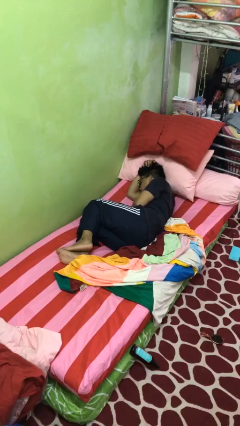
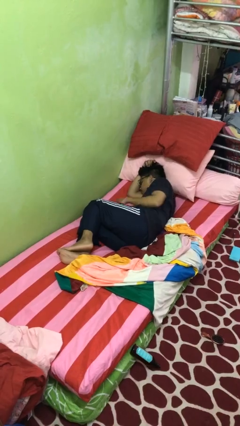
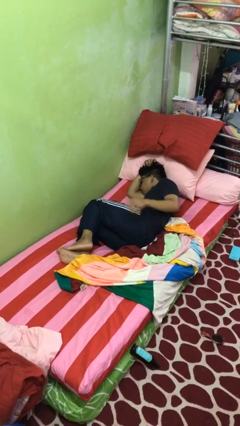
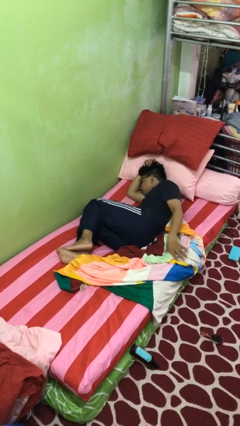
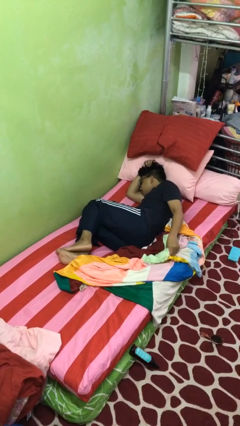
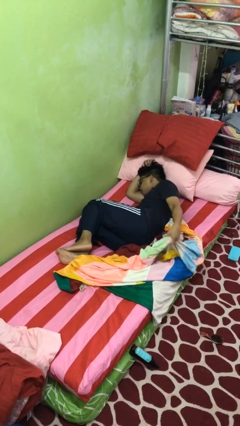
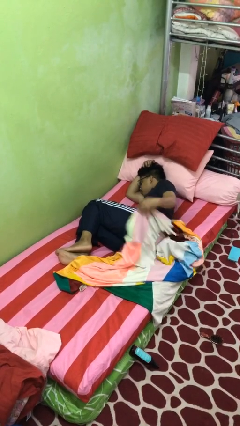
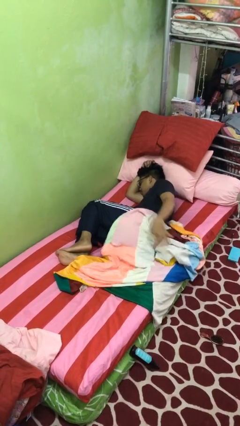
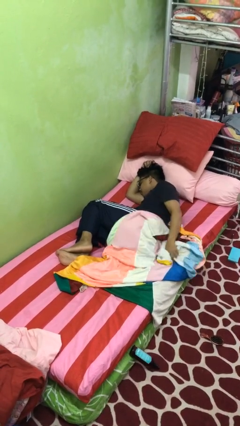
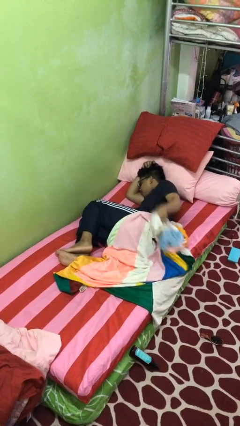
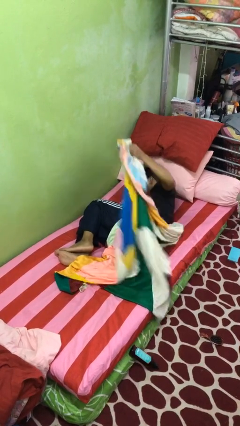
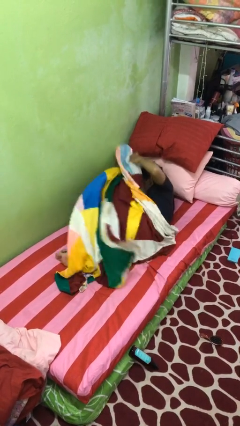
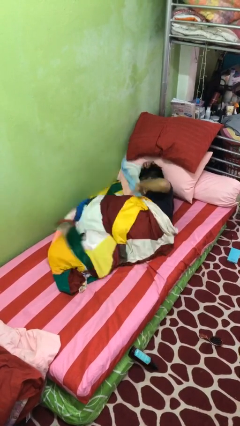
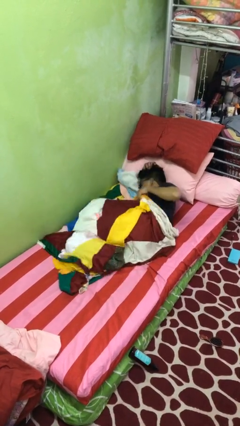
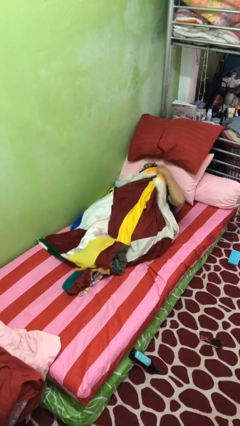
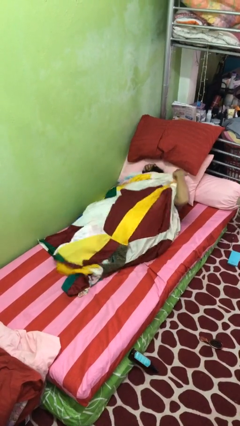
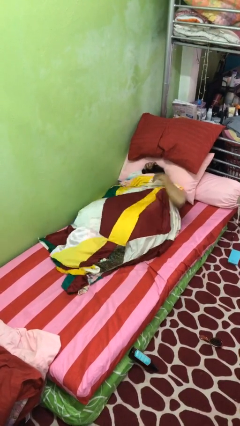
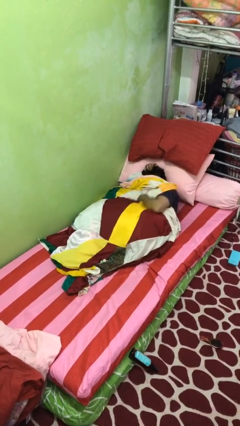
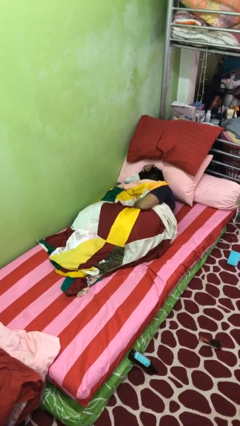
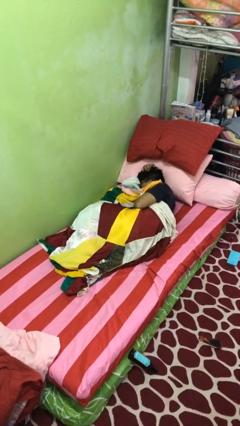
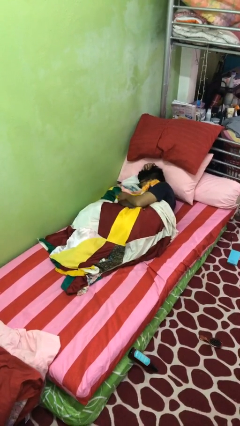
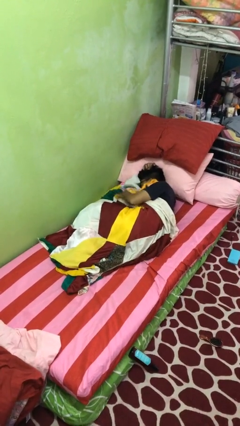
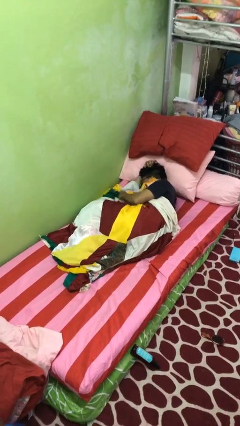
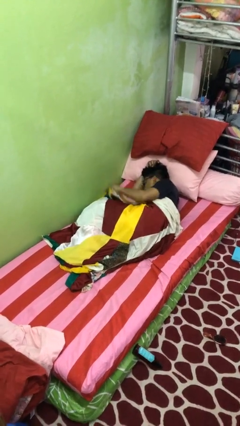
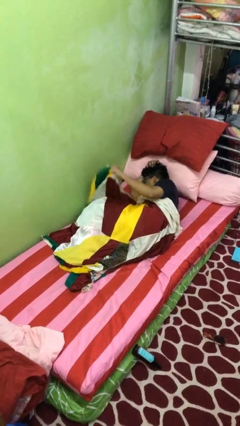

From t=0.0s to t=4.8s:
person covers with blanket

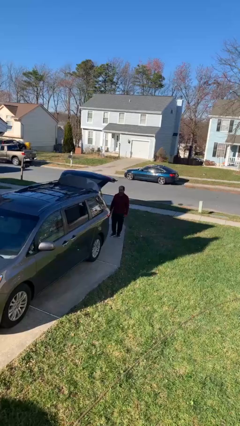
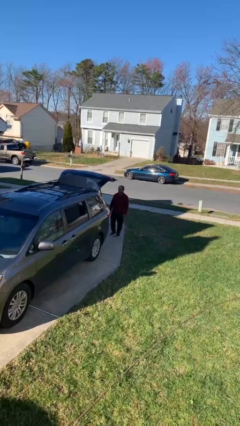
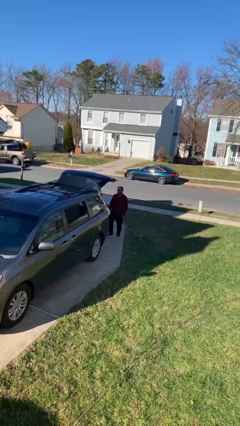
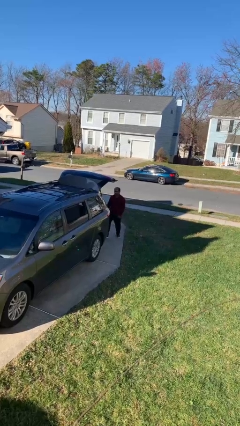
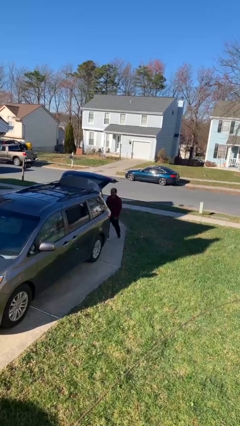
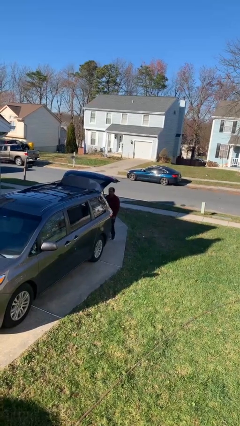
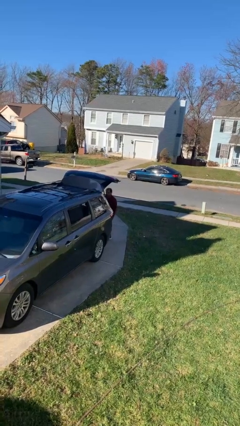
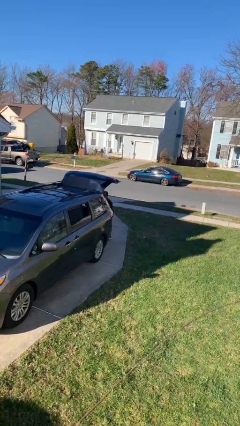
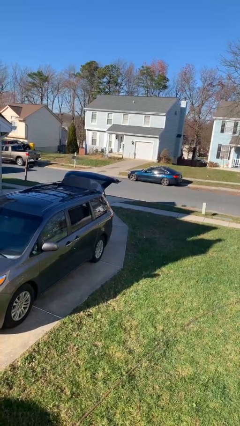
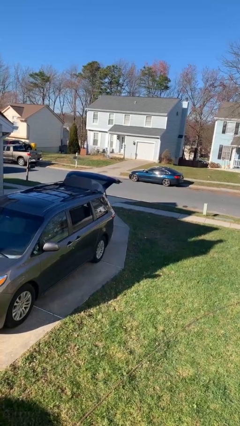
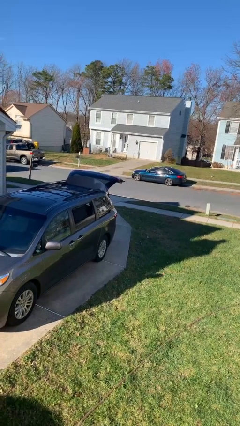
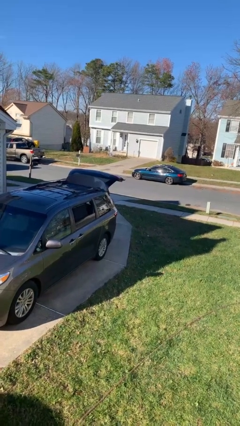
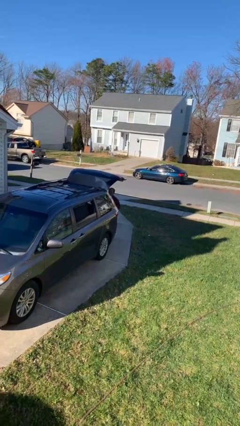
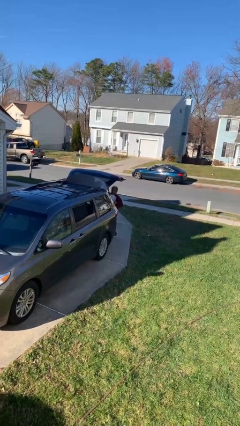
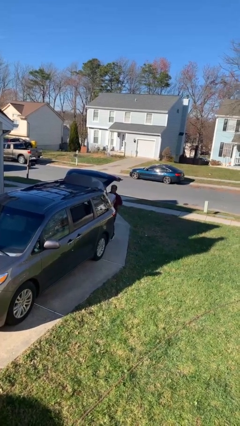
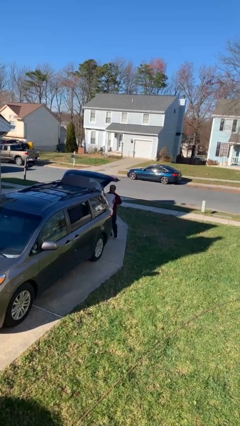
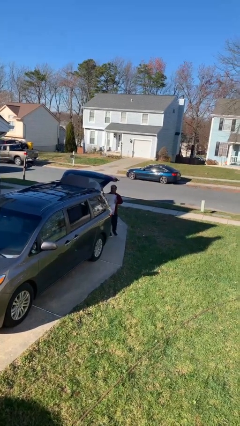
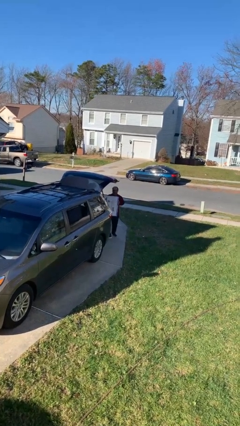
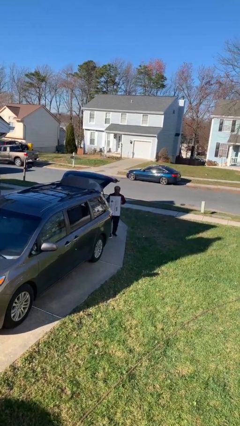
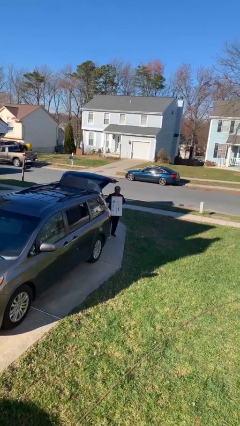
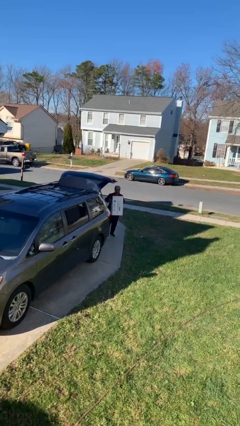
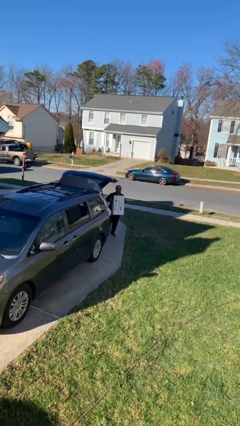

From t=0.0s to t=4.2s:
person unloads car

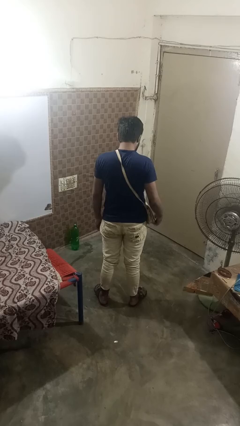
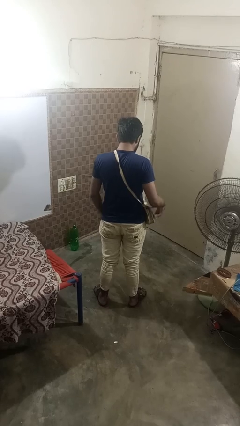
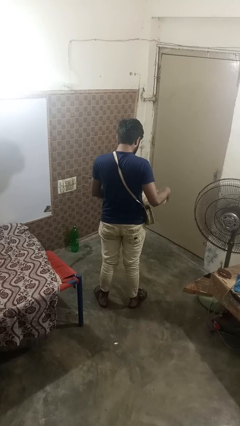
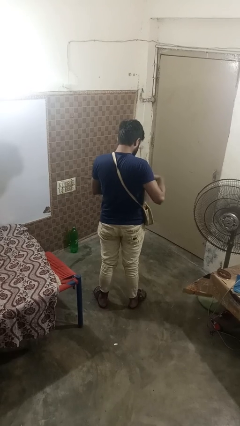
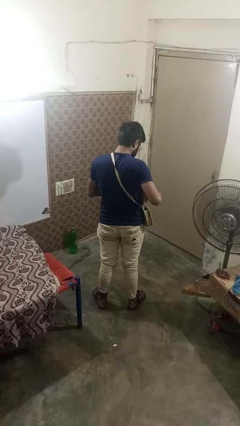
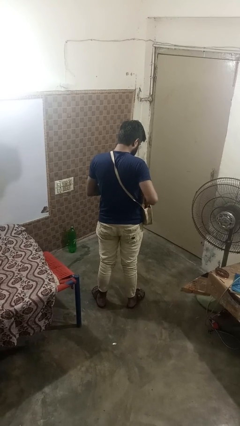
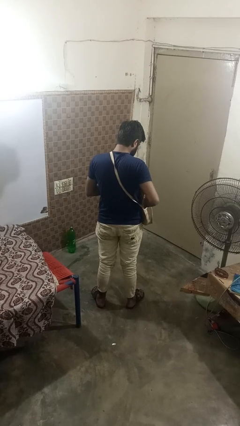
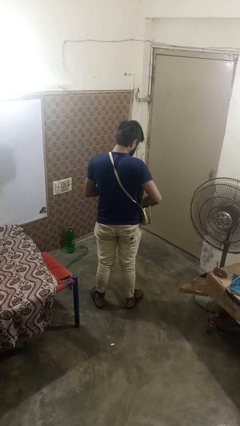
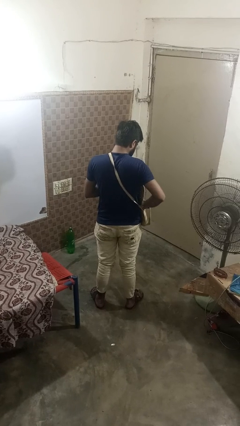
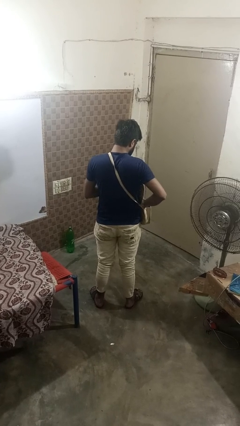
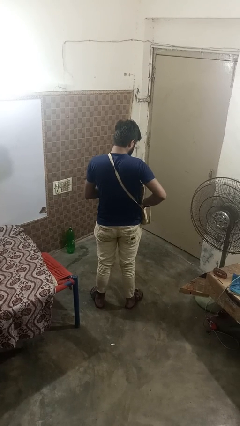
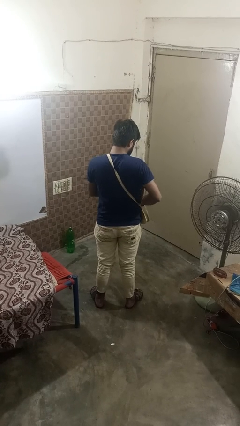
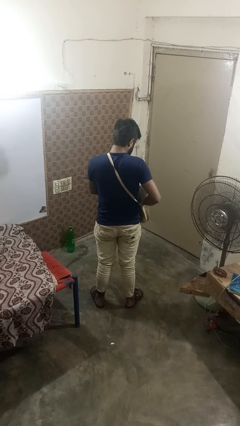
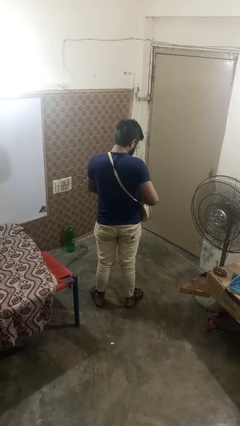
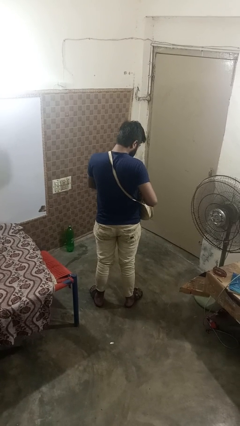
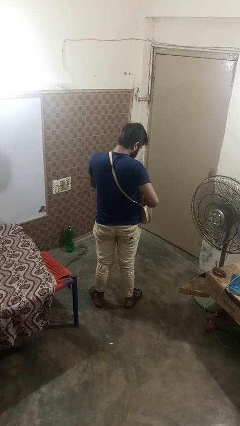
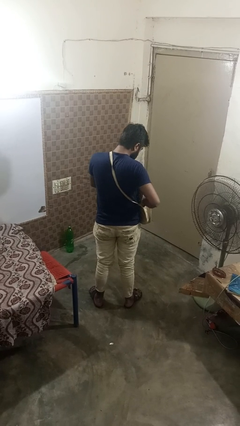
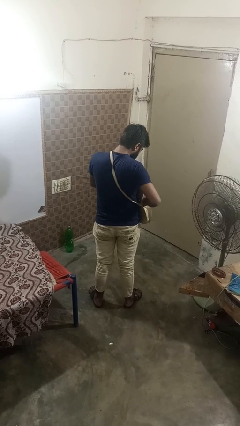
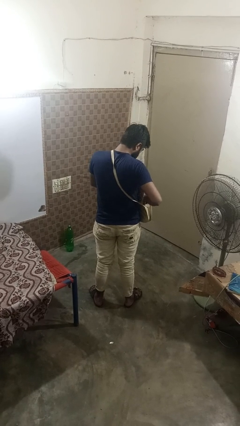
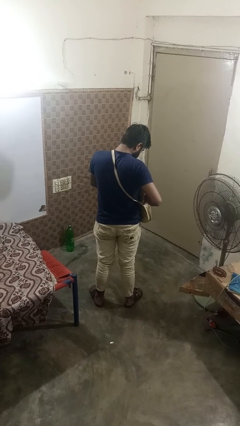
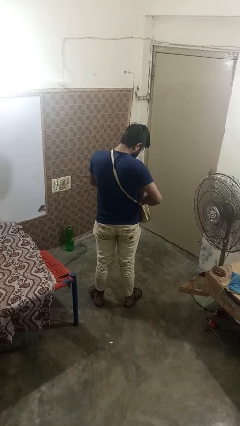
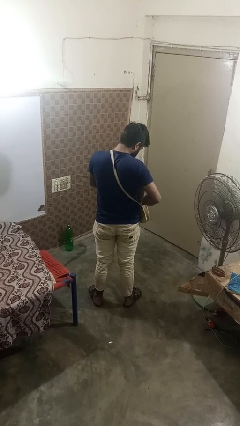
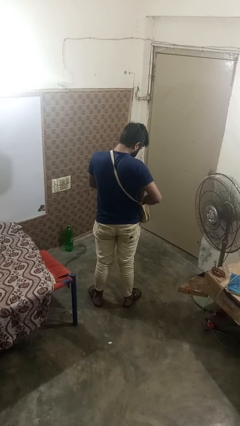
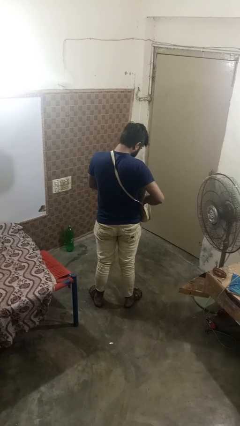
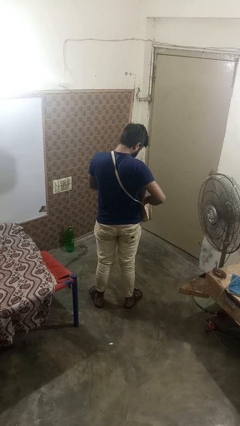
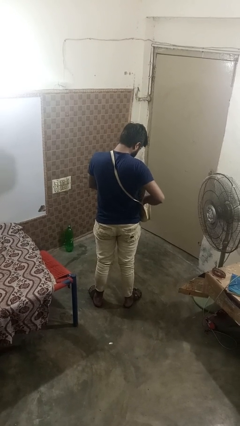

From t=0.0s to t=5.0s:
person searches in purse

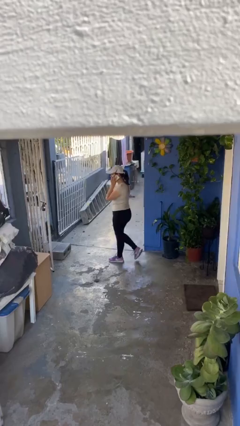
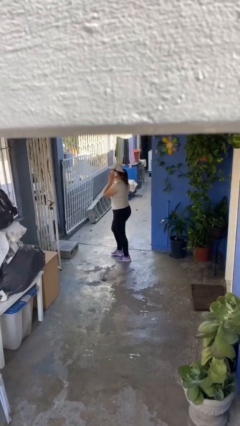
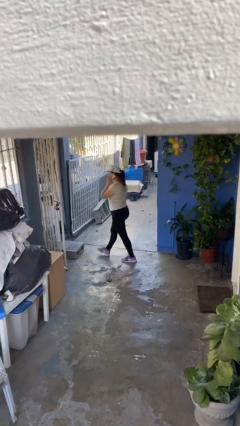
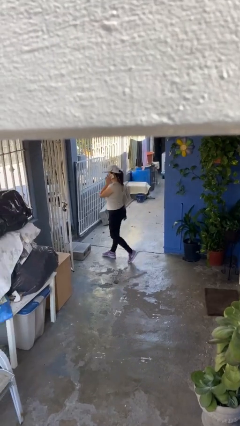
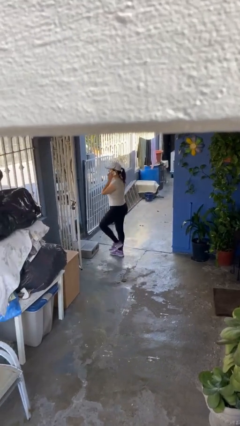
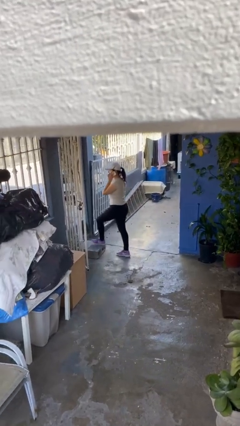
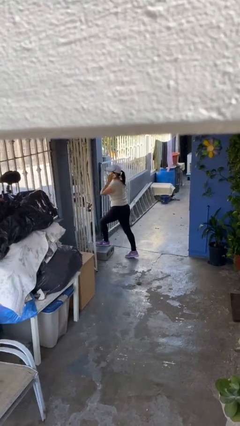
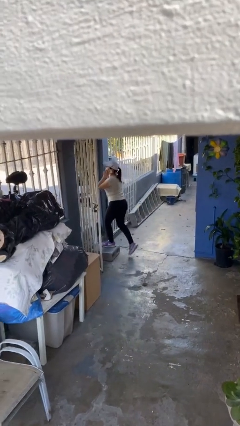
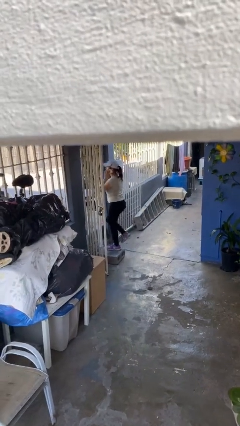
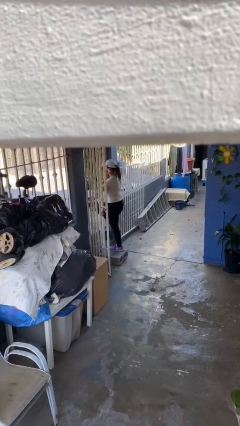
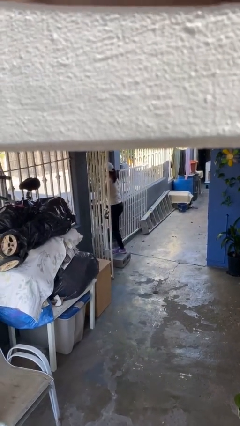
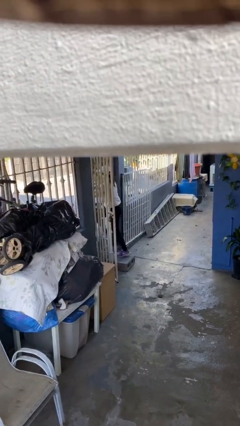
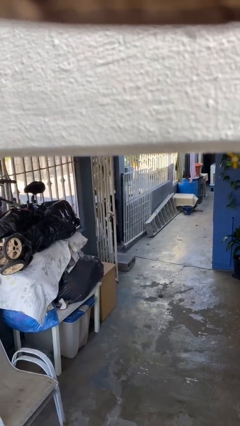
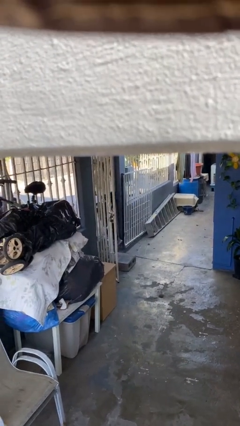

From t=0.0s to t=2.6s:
person exits scene through structure

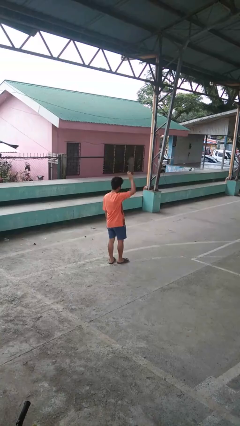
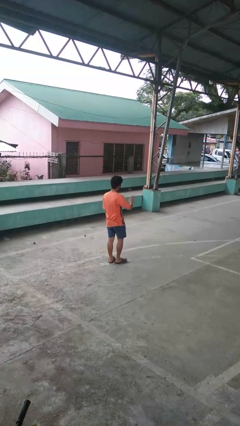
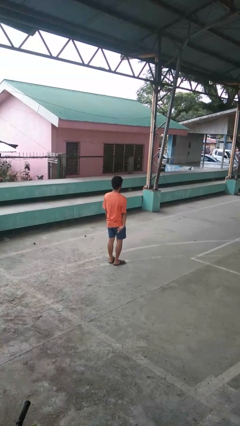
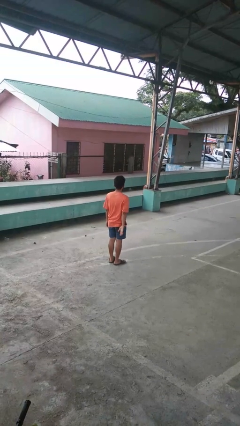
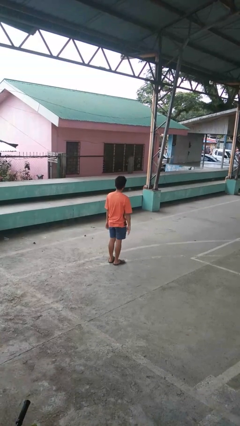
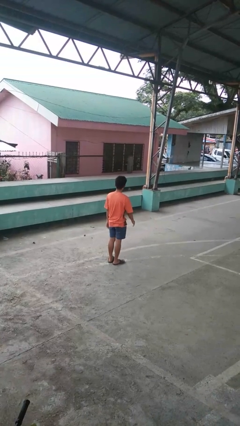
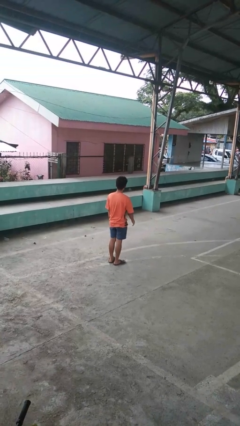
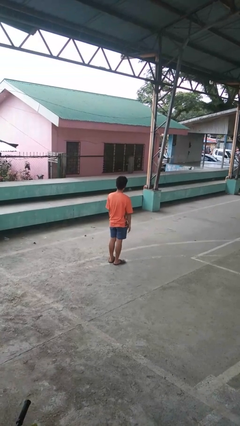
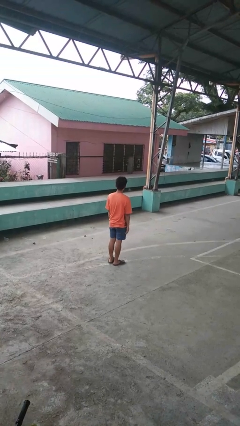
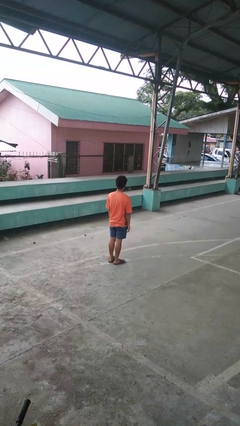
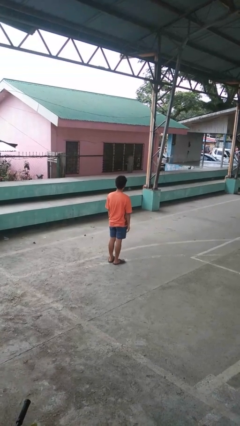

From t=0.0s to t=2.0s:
person gestures lower hand
